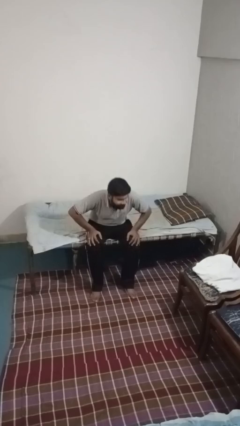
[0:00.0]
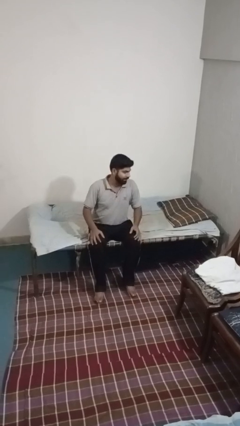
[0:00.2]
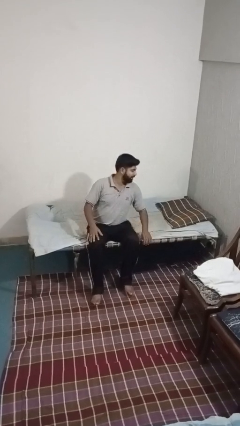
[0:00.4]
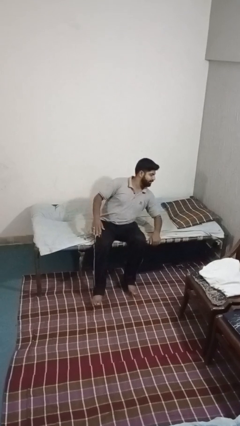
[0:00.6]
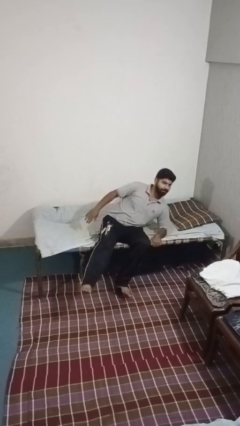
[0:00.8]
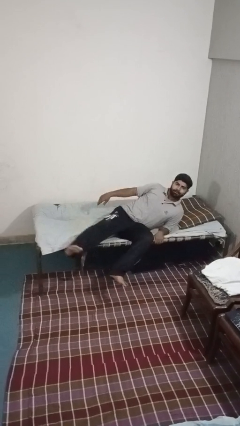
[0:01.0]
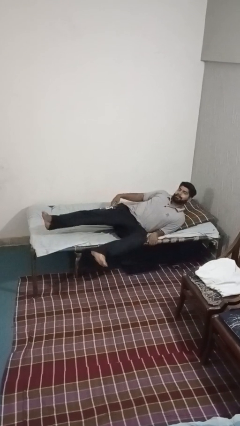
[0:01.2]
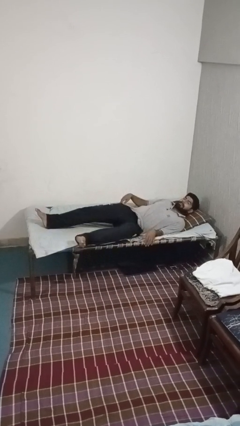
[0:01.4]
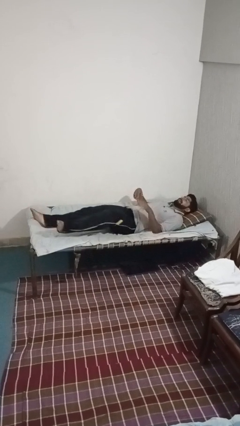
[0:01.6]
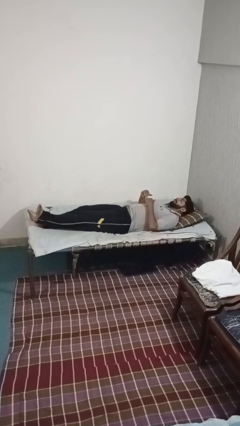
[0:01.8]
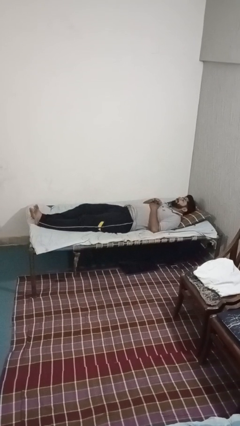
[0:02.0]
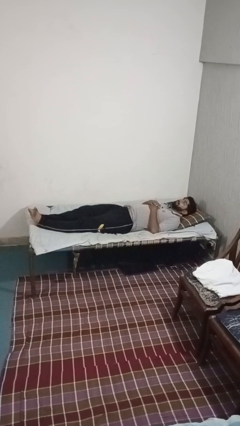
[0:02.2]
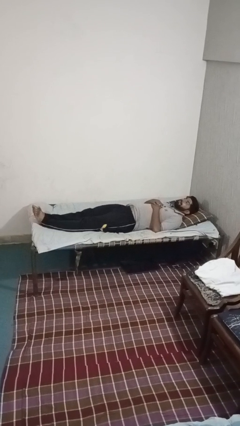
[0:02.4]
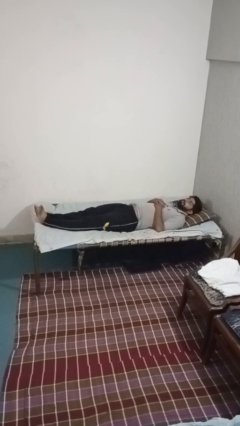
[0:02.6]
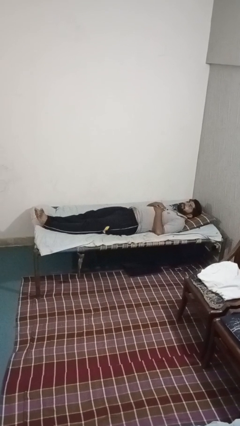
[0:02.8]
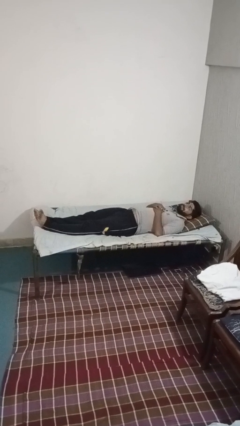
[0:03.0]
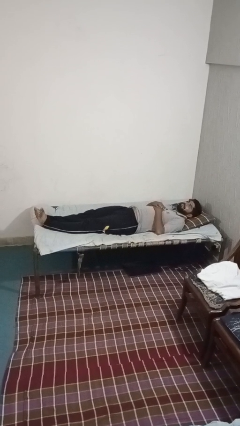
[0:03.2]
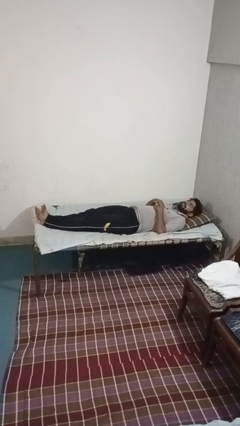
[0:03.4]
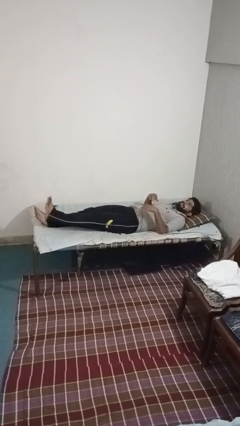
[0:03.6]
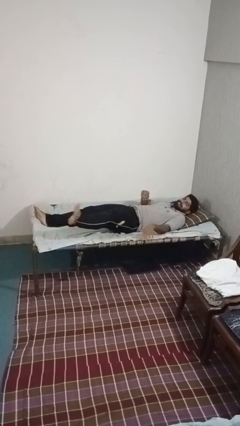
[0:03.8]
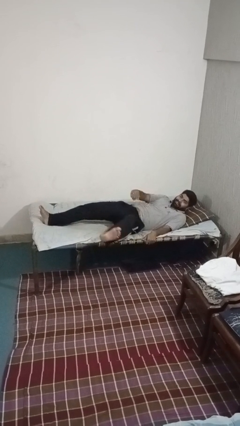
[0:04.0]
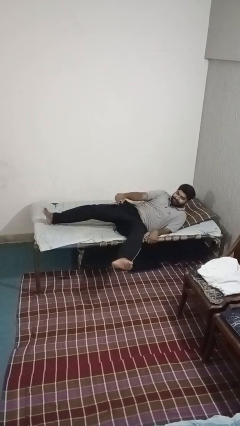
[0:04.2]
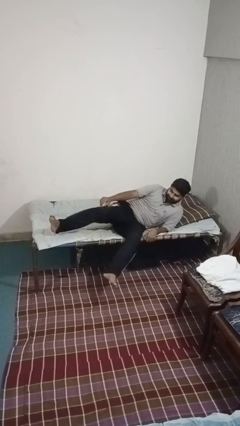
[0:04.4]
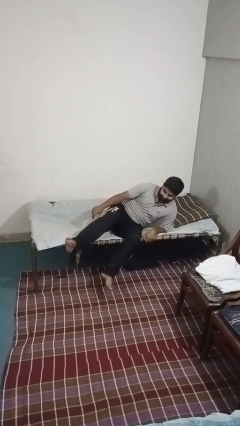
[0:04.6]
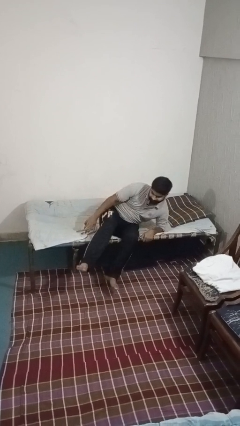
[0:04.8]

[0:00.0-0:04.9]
person lies down on bed

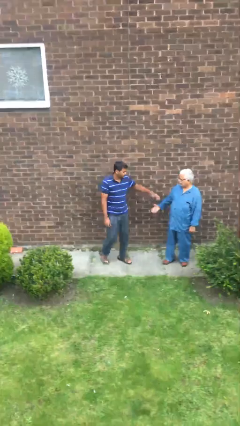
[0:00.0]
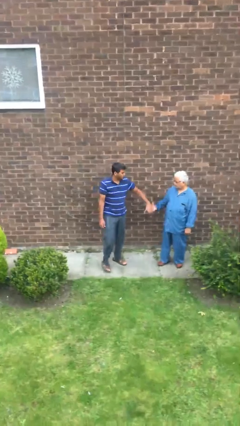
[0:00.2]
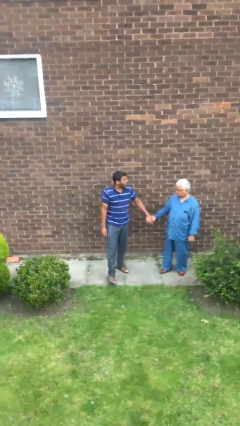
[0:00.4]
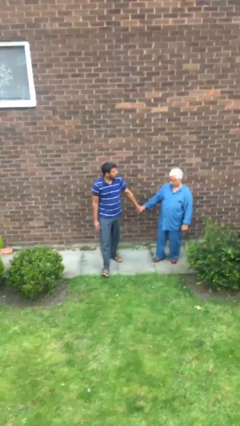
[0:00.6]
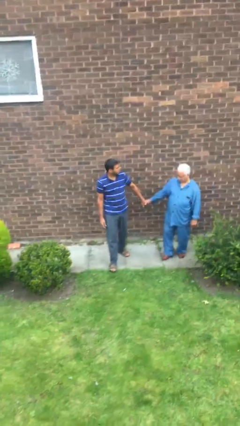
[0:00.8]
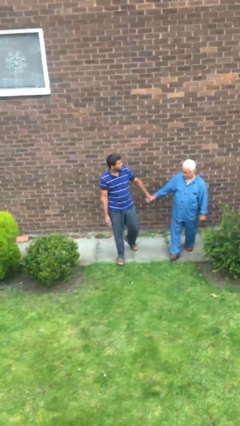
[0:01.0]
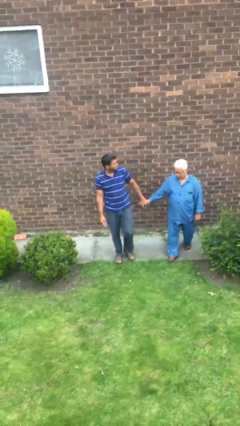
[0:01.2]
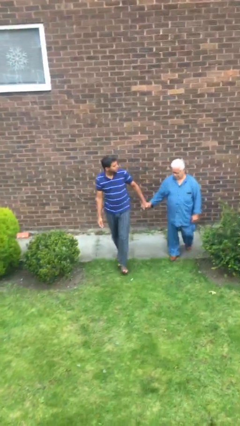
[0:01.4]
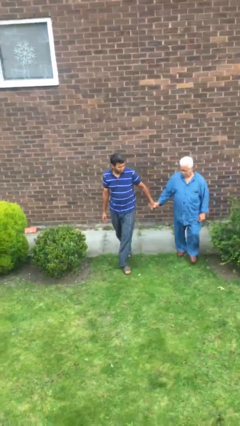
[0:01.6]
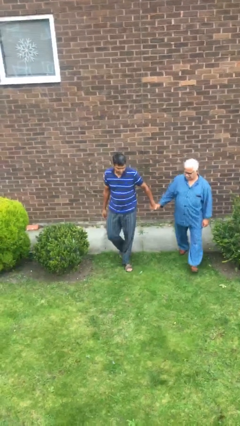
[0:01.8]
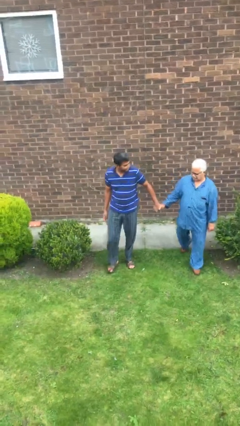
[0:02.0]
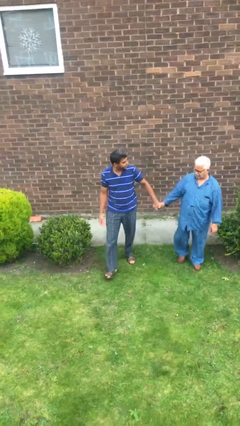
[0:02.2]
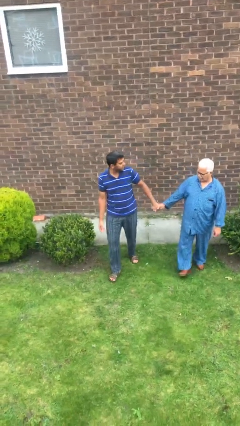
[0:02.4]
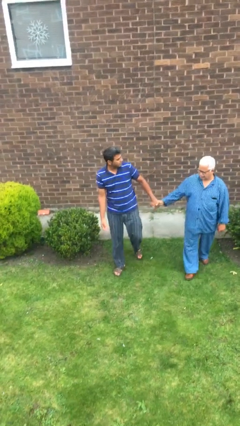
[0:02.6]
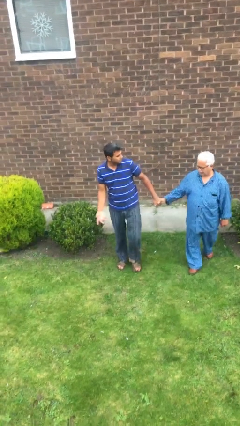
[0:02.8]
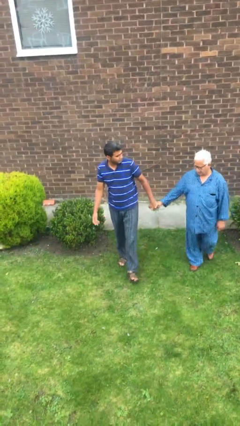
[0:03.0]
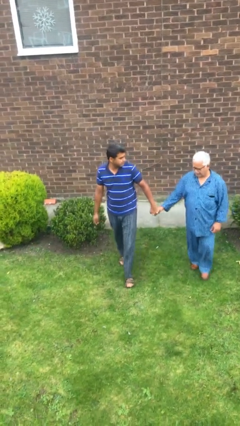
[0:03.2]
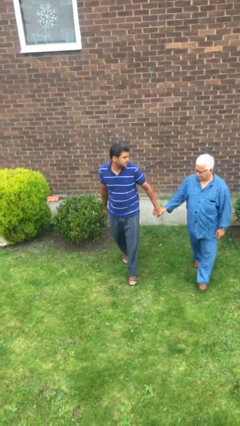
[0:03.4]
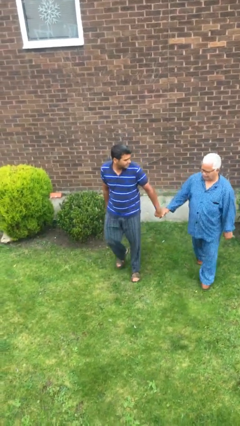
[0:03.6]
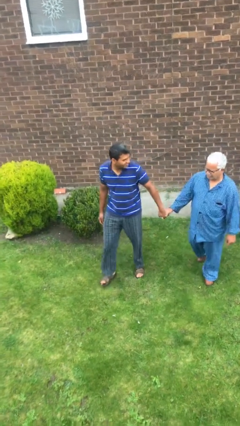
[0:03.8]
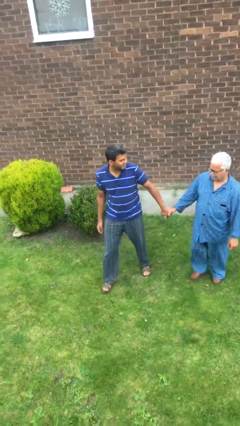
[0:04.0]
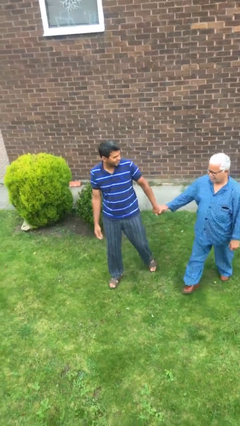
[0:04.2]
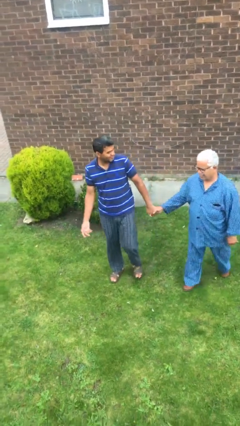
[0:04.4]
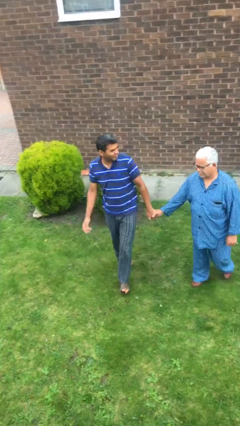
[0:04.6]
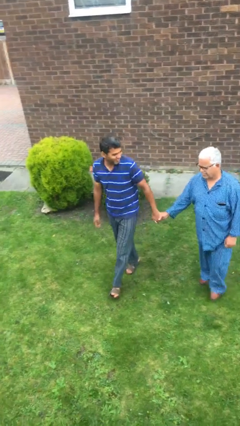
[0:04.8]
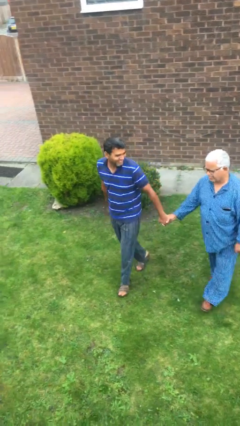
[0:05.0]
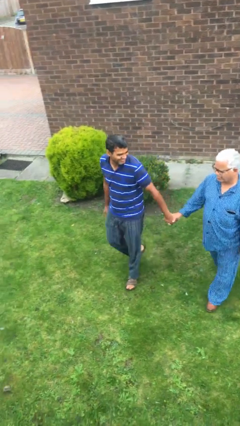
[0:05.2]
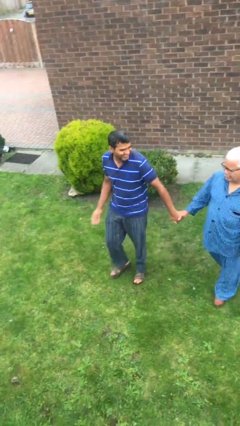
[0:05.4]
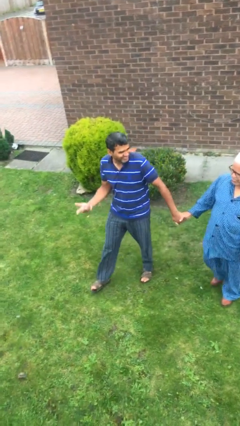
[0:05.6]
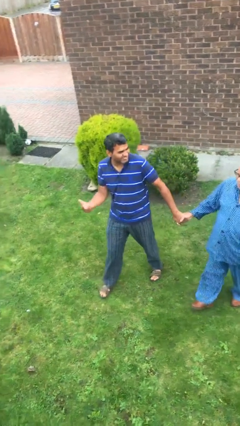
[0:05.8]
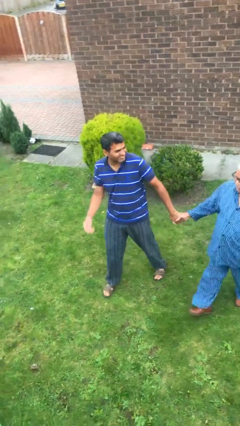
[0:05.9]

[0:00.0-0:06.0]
person holds hand

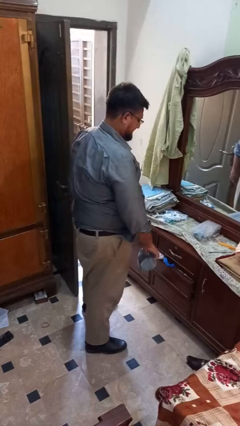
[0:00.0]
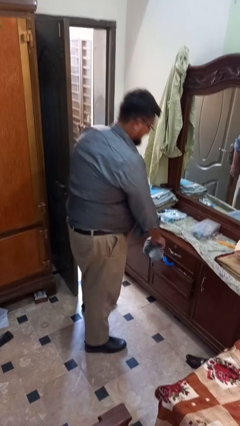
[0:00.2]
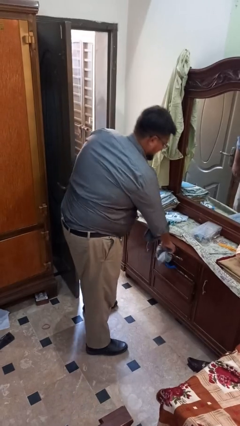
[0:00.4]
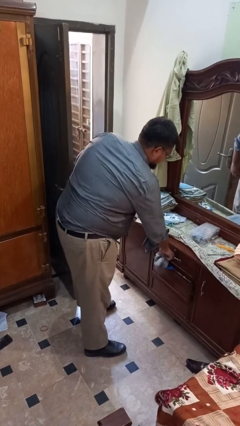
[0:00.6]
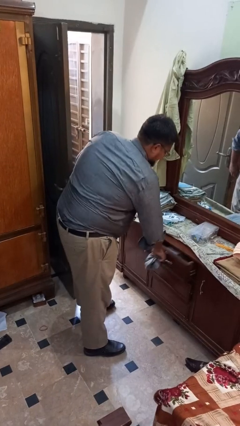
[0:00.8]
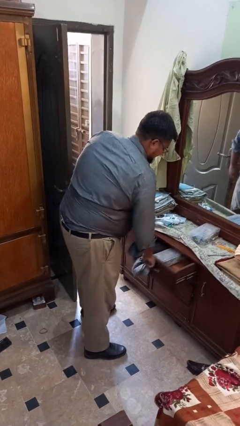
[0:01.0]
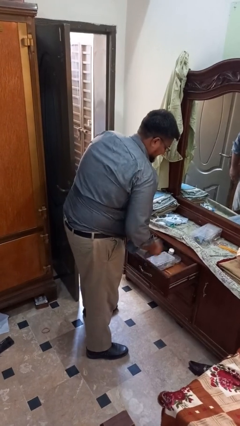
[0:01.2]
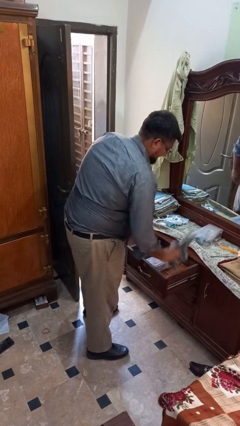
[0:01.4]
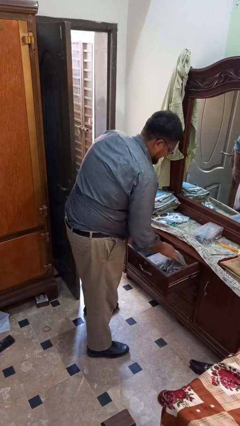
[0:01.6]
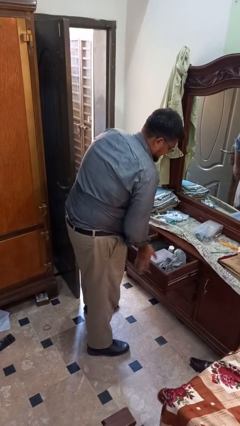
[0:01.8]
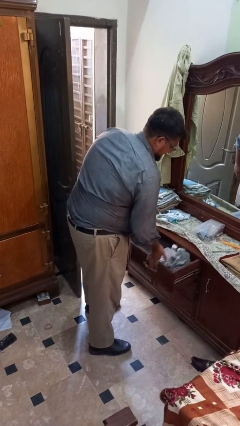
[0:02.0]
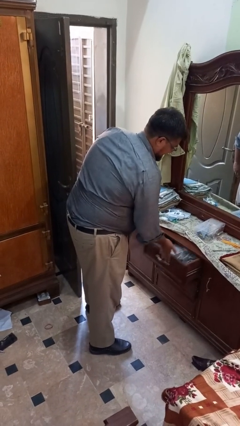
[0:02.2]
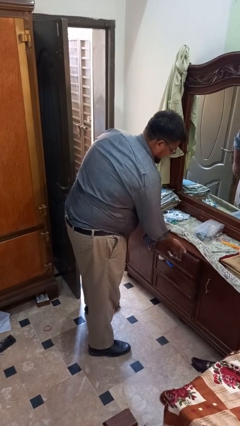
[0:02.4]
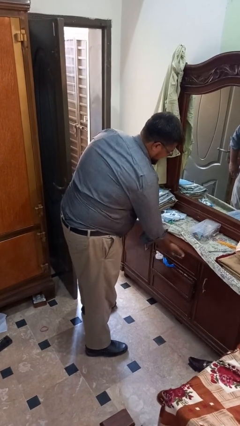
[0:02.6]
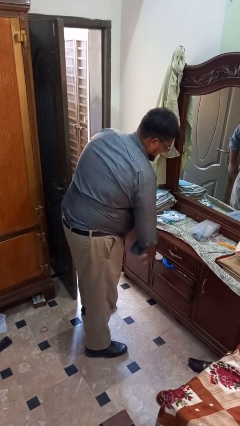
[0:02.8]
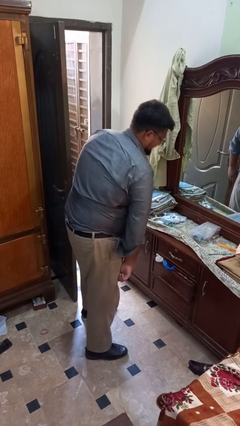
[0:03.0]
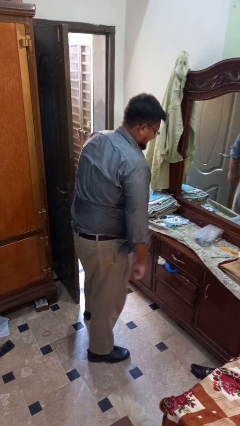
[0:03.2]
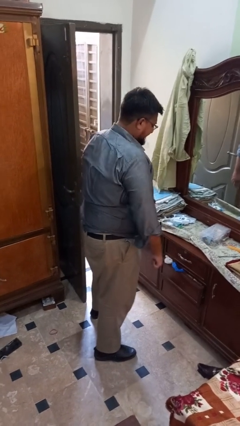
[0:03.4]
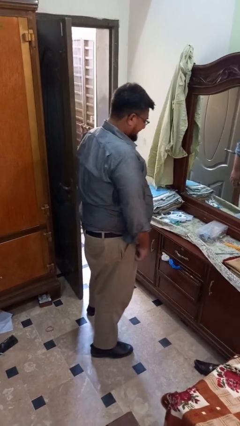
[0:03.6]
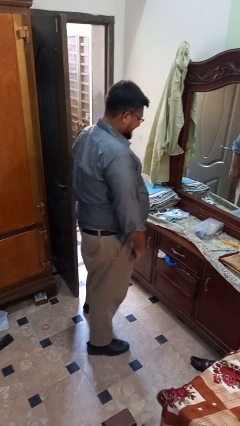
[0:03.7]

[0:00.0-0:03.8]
person puts clothes into dresser

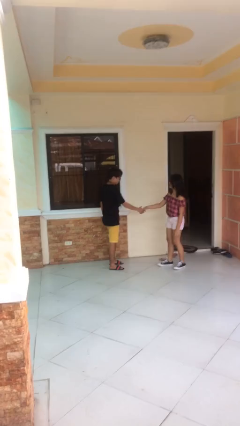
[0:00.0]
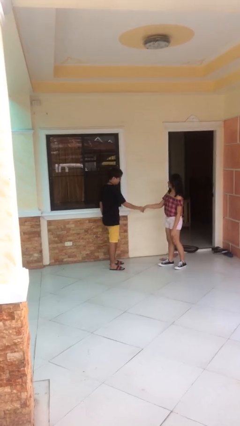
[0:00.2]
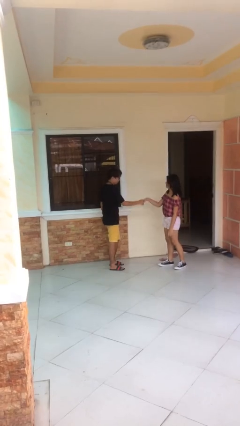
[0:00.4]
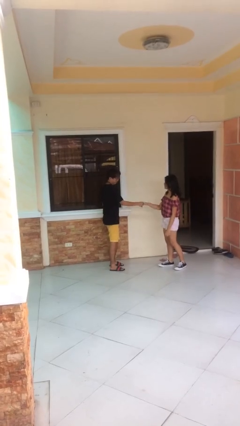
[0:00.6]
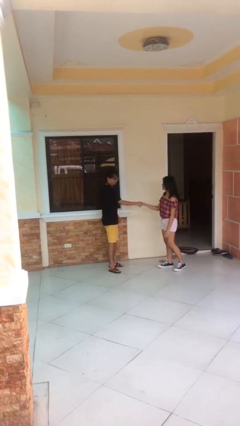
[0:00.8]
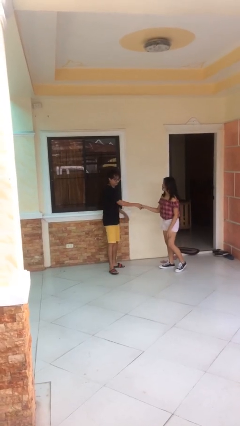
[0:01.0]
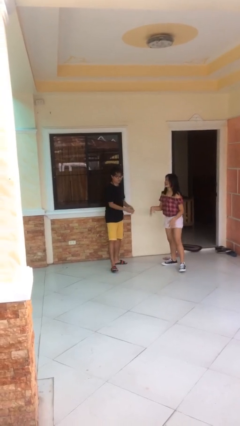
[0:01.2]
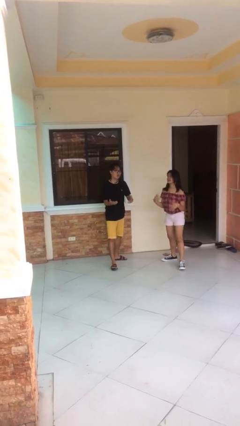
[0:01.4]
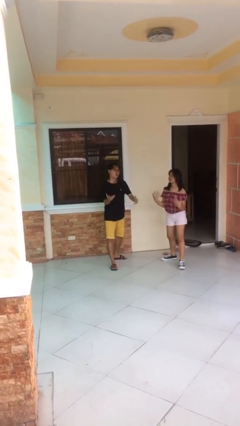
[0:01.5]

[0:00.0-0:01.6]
person shakes hand

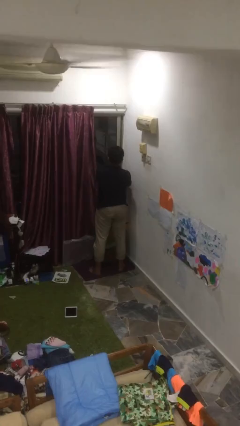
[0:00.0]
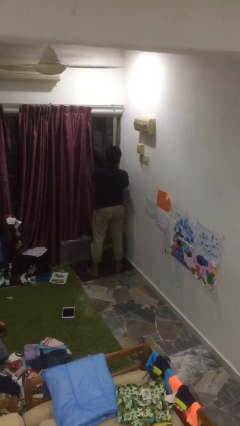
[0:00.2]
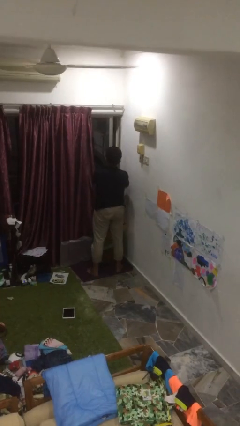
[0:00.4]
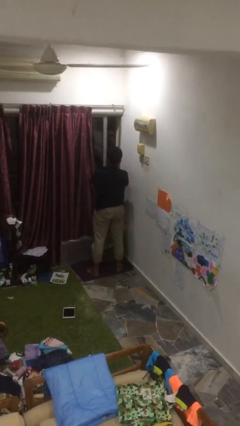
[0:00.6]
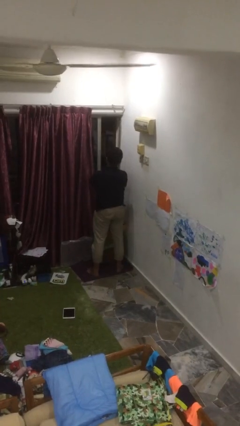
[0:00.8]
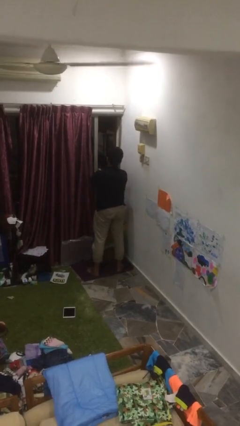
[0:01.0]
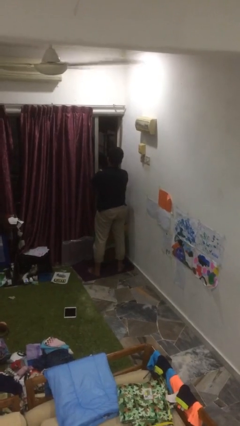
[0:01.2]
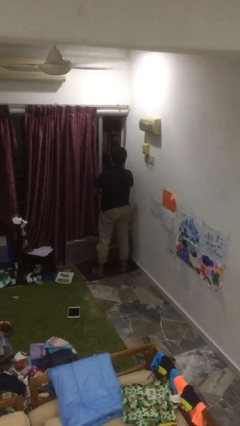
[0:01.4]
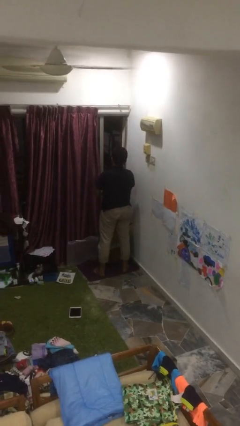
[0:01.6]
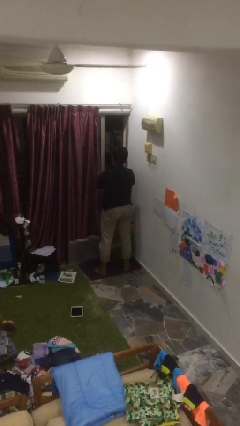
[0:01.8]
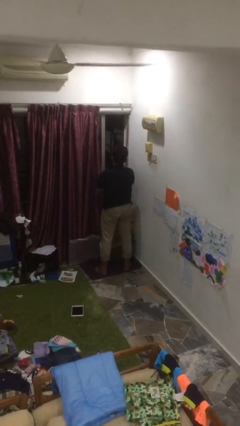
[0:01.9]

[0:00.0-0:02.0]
person opens home window
